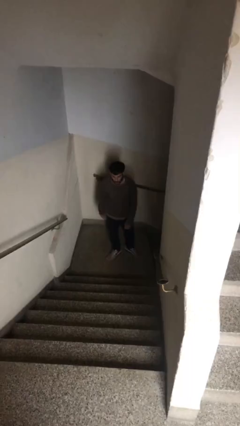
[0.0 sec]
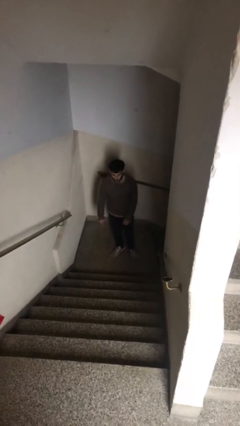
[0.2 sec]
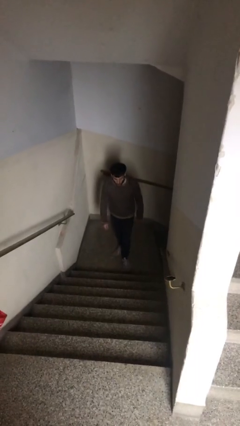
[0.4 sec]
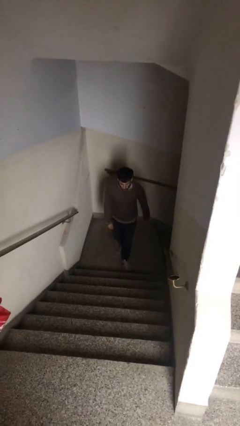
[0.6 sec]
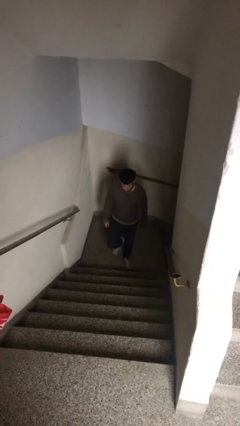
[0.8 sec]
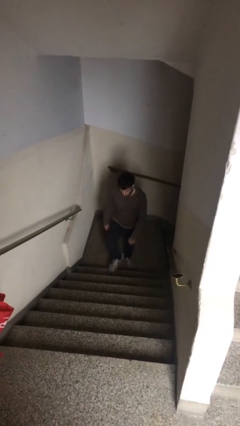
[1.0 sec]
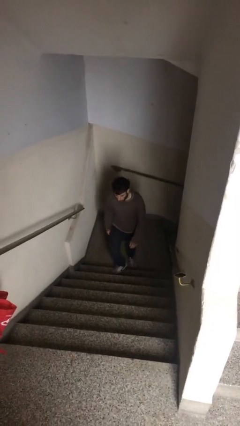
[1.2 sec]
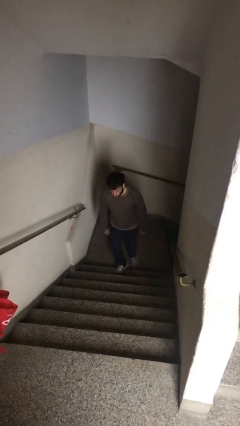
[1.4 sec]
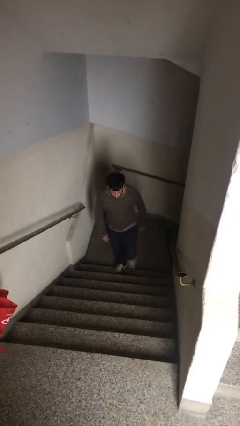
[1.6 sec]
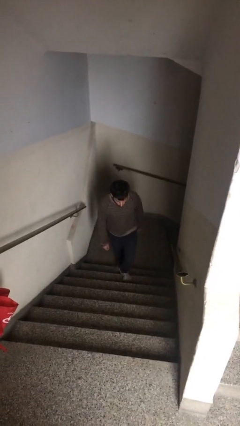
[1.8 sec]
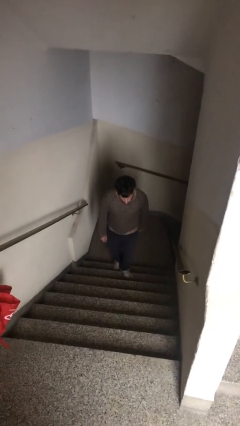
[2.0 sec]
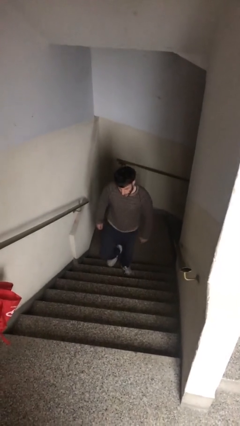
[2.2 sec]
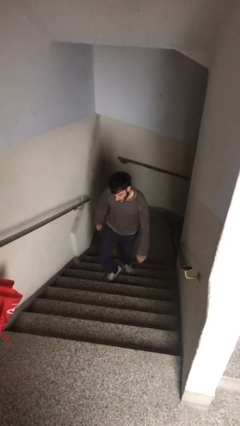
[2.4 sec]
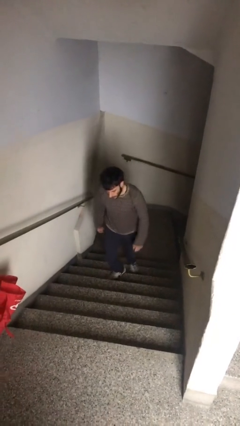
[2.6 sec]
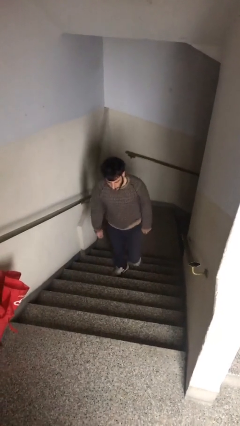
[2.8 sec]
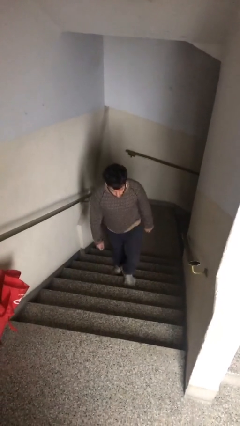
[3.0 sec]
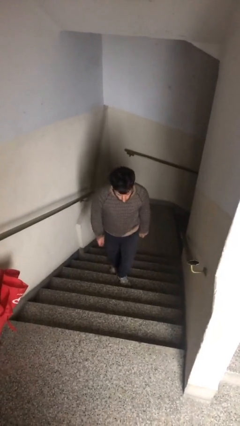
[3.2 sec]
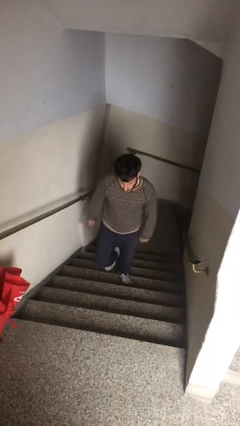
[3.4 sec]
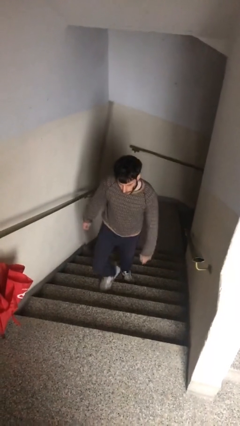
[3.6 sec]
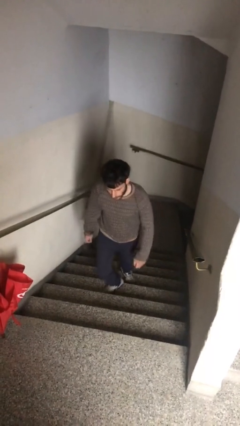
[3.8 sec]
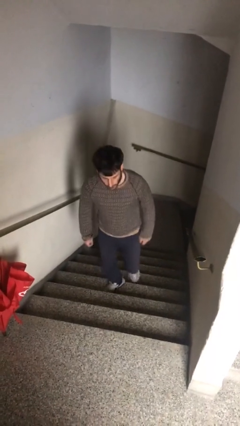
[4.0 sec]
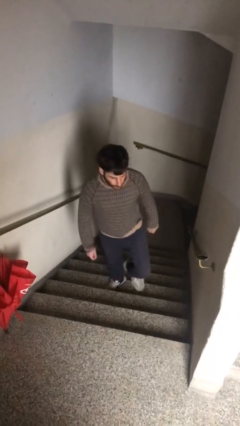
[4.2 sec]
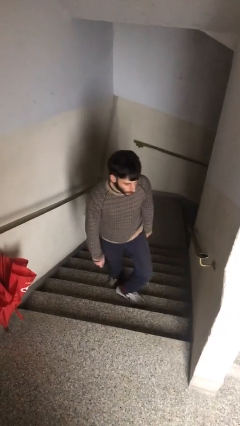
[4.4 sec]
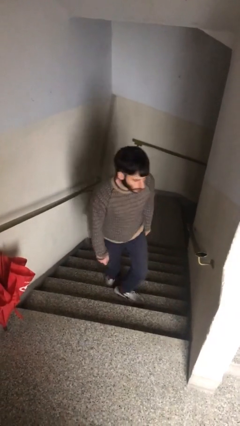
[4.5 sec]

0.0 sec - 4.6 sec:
person climbs up stairs

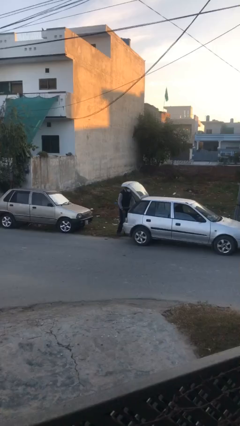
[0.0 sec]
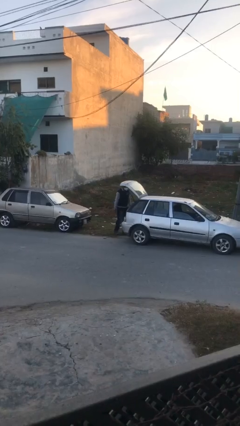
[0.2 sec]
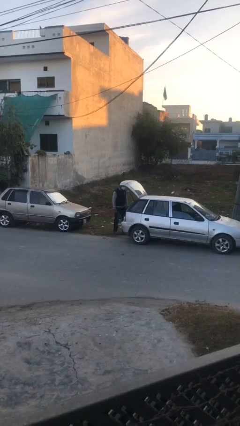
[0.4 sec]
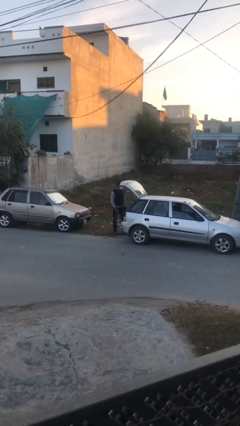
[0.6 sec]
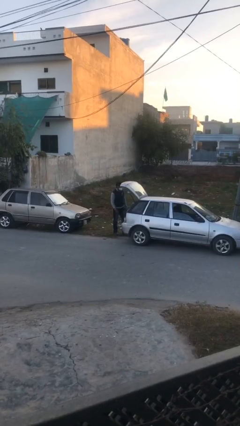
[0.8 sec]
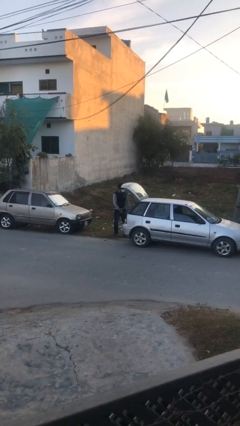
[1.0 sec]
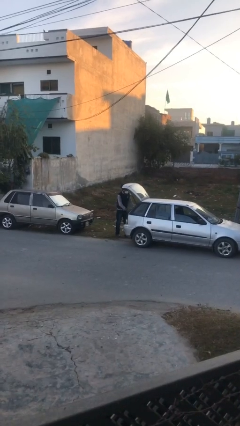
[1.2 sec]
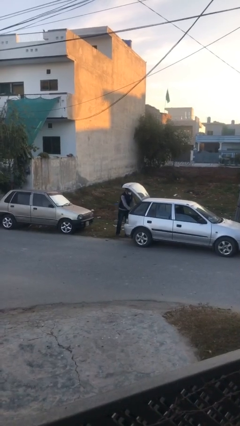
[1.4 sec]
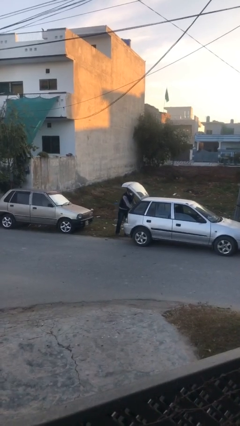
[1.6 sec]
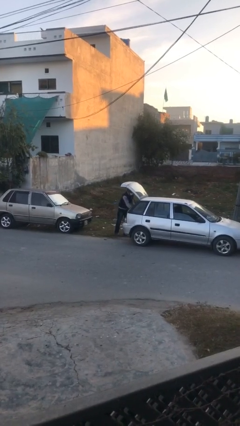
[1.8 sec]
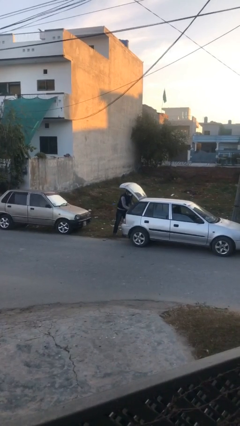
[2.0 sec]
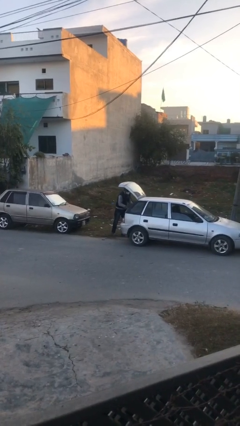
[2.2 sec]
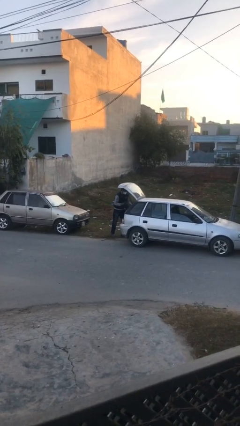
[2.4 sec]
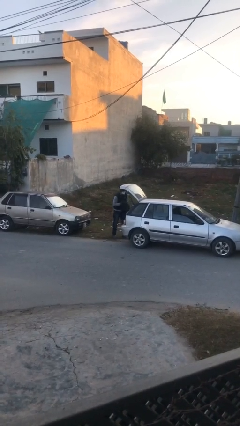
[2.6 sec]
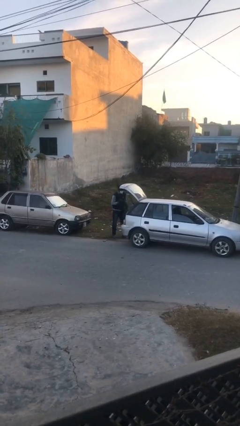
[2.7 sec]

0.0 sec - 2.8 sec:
person unloads car

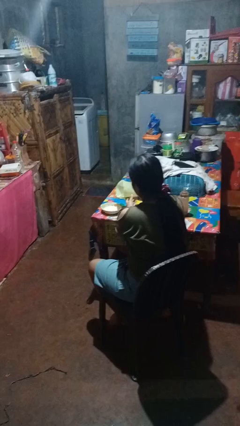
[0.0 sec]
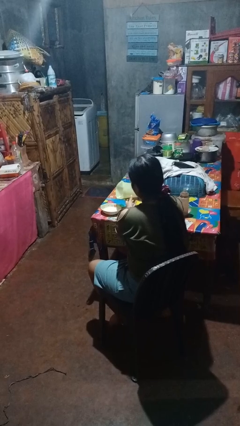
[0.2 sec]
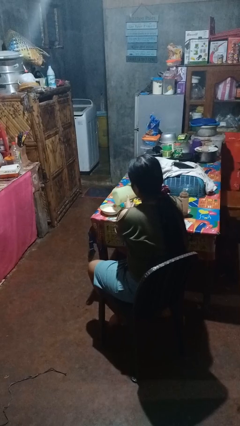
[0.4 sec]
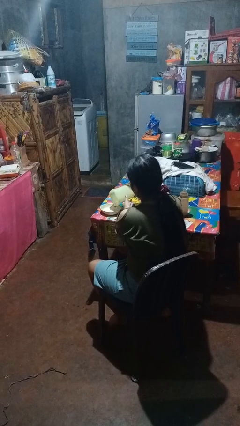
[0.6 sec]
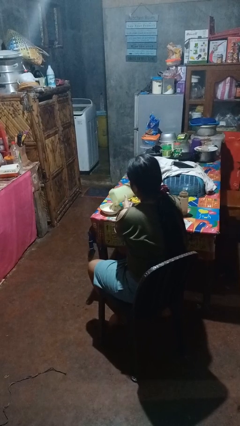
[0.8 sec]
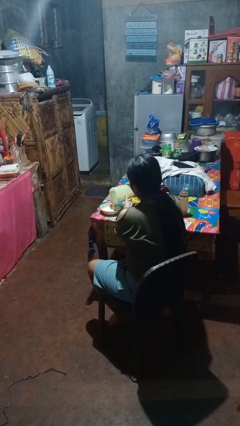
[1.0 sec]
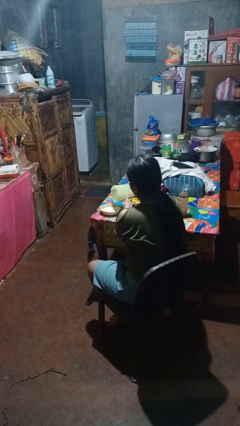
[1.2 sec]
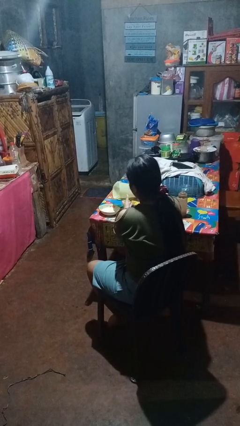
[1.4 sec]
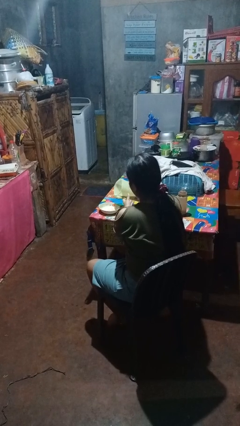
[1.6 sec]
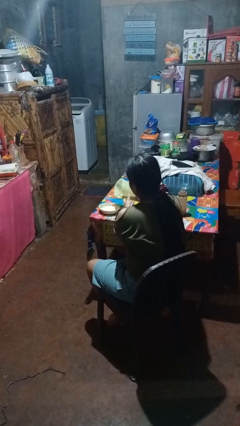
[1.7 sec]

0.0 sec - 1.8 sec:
person pours into bowl

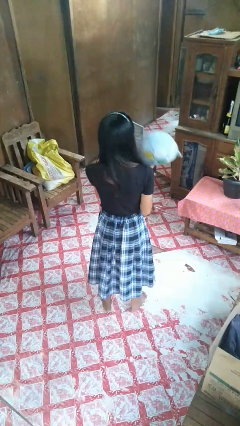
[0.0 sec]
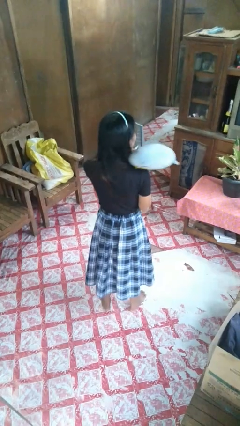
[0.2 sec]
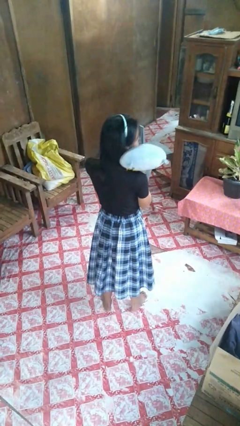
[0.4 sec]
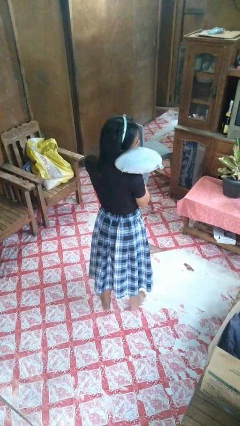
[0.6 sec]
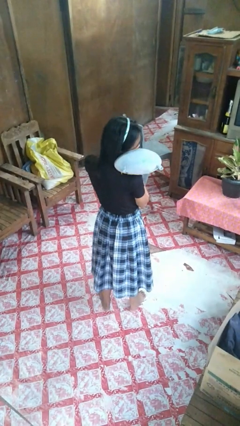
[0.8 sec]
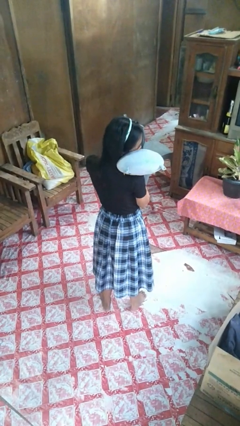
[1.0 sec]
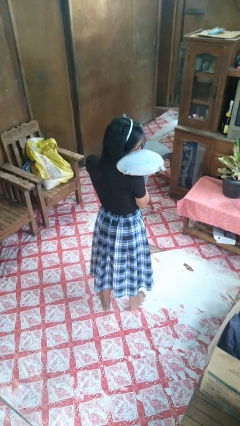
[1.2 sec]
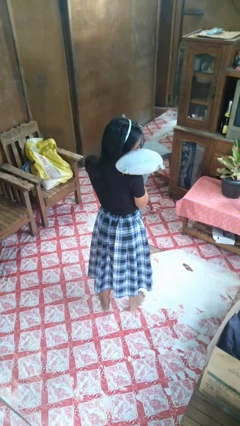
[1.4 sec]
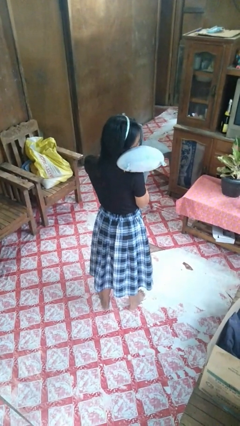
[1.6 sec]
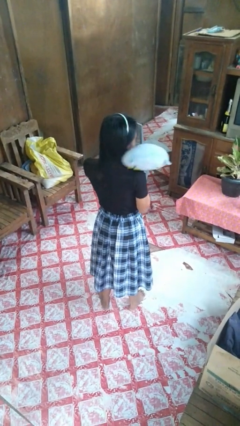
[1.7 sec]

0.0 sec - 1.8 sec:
person hugs stuffed animal

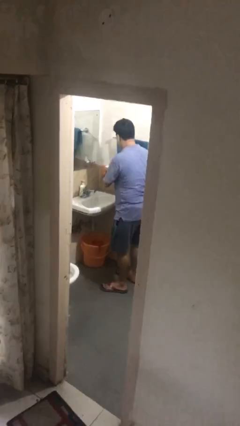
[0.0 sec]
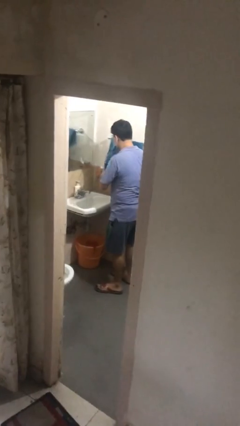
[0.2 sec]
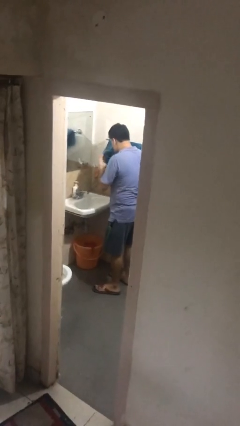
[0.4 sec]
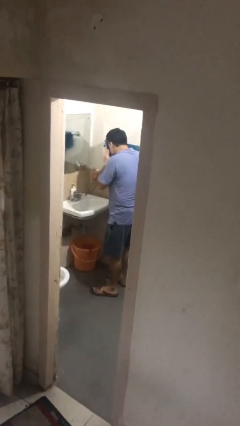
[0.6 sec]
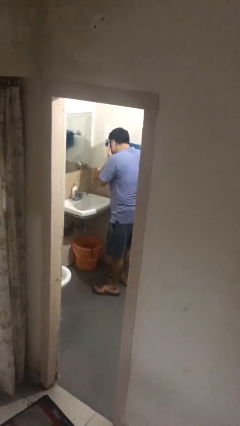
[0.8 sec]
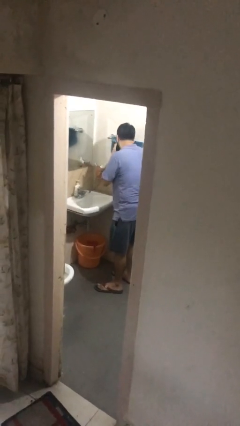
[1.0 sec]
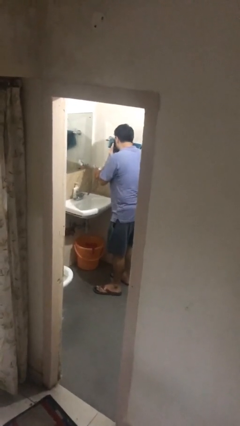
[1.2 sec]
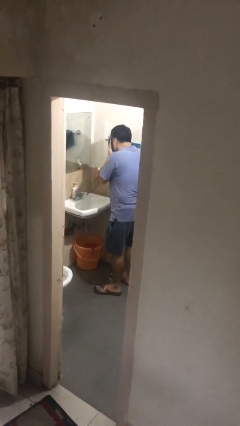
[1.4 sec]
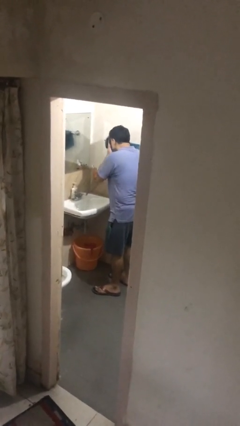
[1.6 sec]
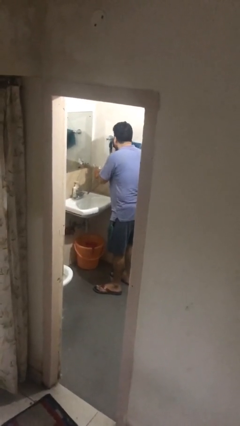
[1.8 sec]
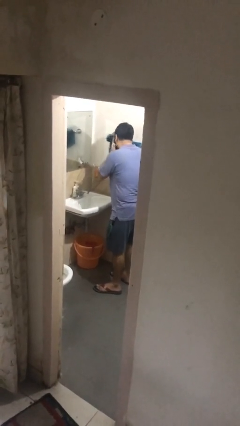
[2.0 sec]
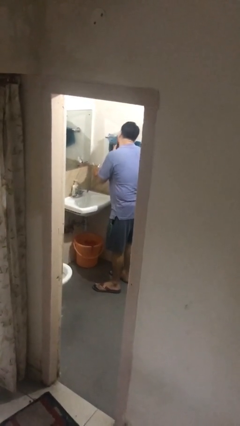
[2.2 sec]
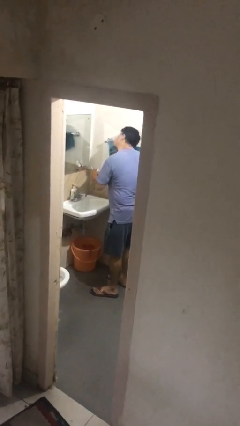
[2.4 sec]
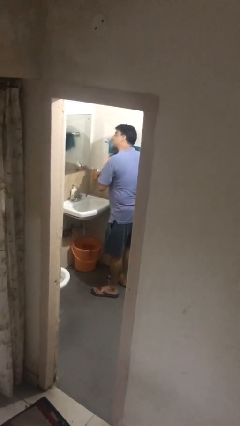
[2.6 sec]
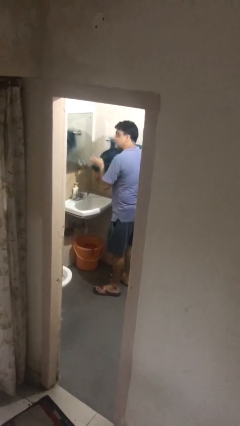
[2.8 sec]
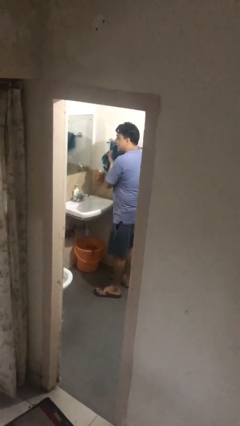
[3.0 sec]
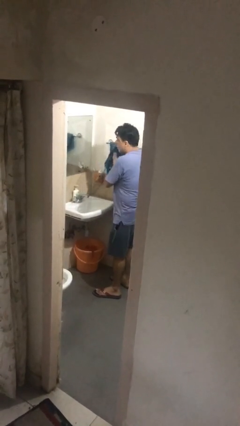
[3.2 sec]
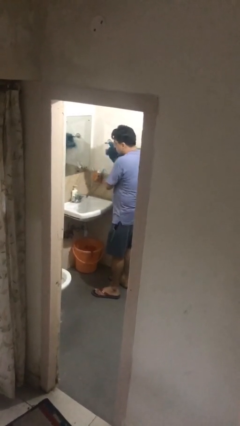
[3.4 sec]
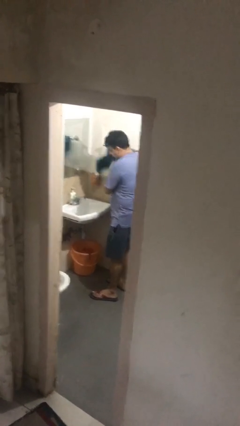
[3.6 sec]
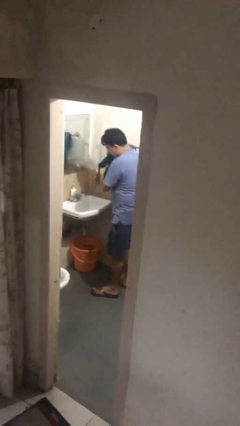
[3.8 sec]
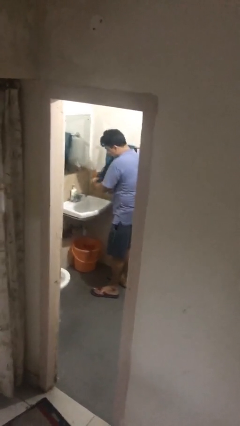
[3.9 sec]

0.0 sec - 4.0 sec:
person dries face with towel

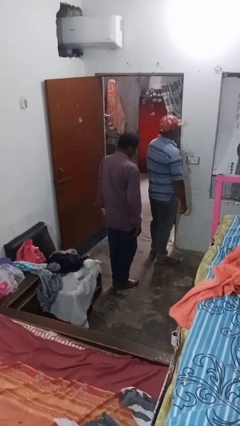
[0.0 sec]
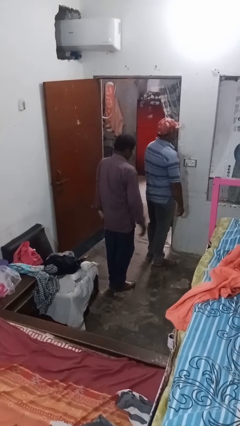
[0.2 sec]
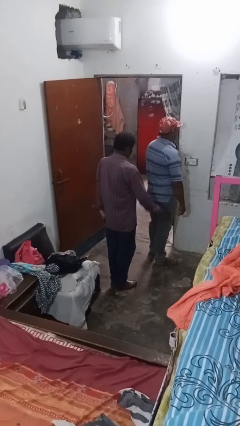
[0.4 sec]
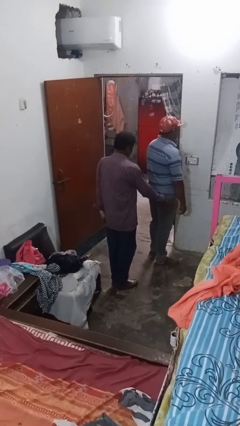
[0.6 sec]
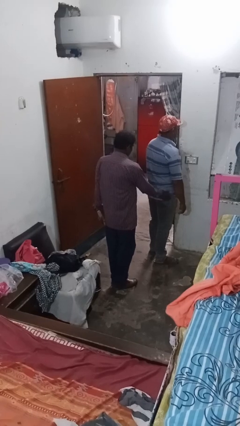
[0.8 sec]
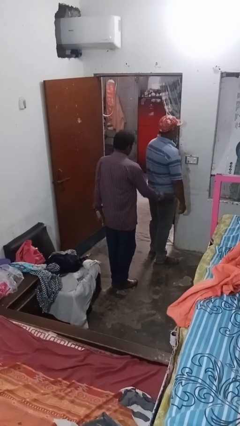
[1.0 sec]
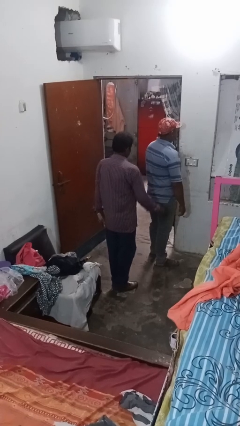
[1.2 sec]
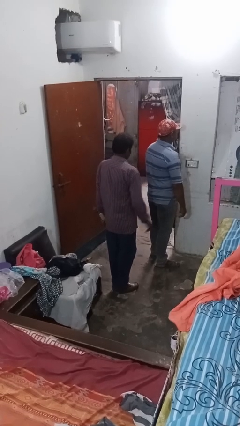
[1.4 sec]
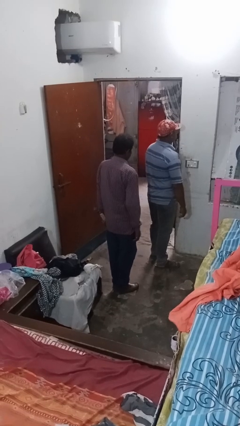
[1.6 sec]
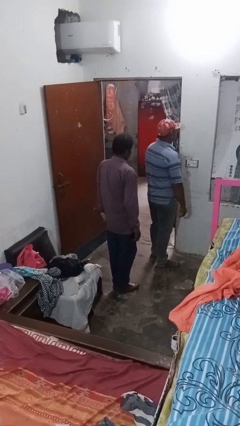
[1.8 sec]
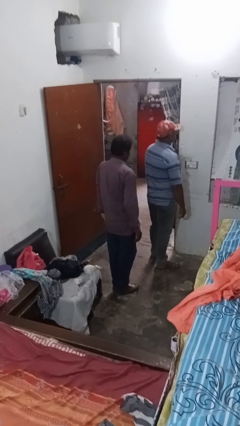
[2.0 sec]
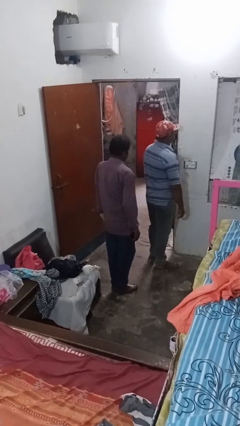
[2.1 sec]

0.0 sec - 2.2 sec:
person bumps into person
